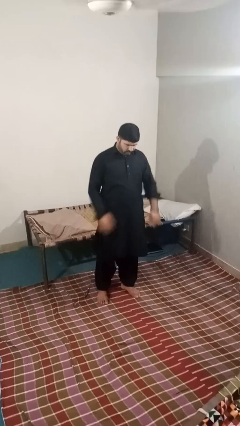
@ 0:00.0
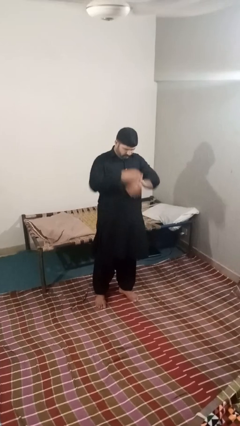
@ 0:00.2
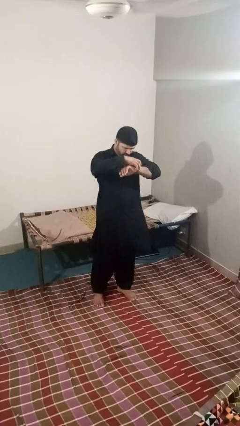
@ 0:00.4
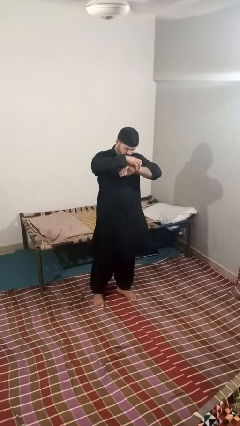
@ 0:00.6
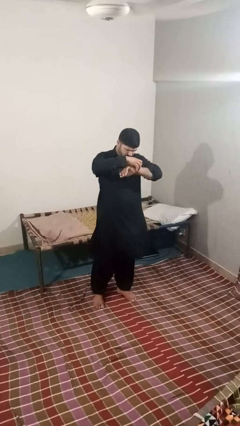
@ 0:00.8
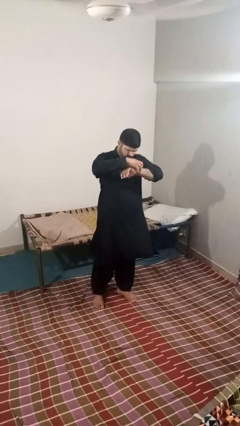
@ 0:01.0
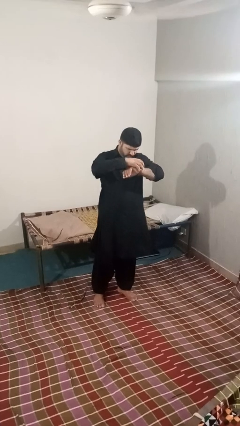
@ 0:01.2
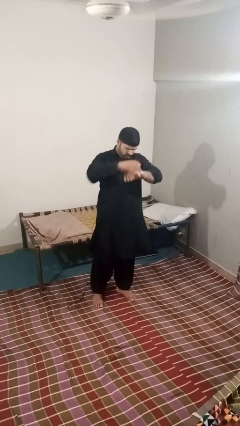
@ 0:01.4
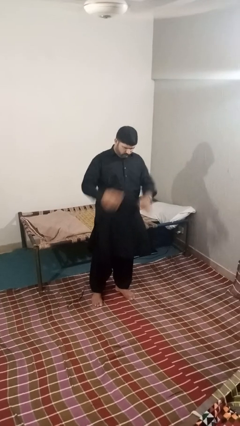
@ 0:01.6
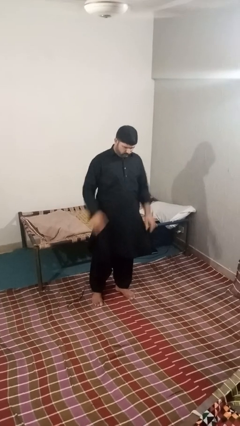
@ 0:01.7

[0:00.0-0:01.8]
person looks at wristwatch

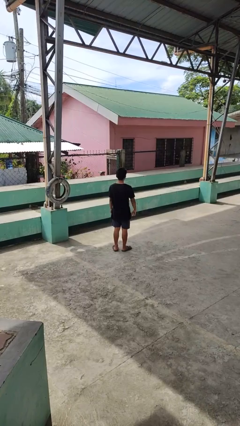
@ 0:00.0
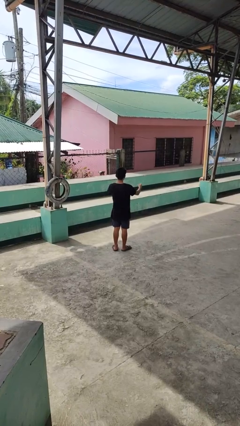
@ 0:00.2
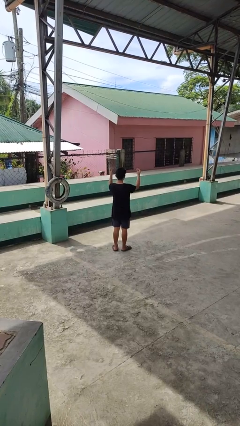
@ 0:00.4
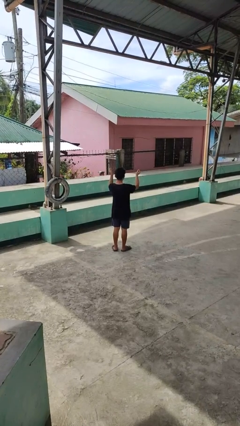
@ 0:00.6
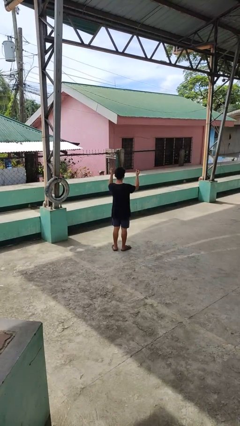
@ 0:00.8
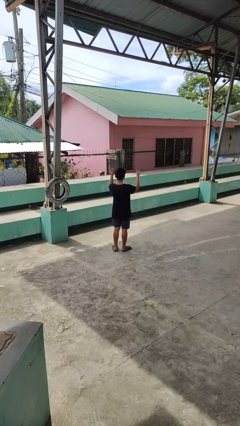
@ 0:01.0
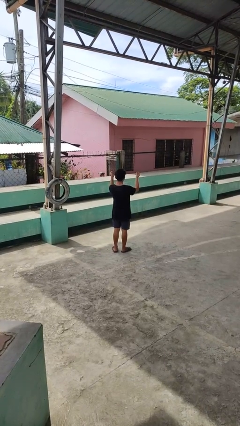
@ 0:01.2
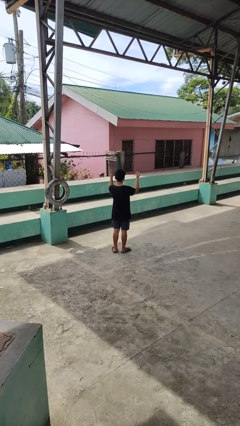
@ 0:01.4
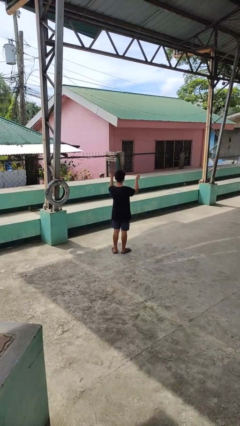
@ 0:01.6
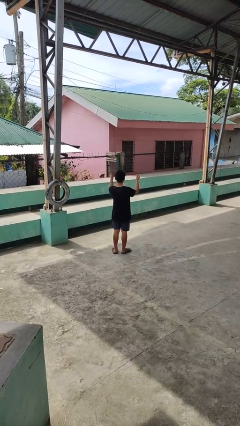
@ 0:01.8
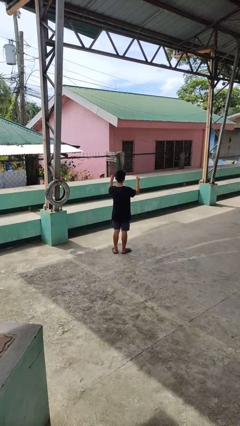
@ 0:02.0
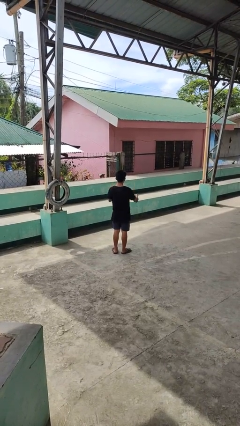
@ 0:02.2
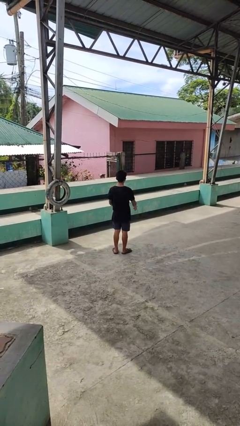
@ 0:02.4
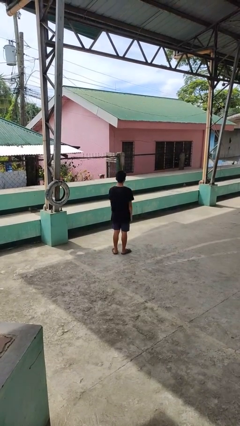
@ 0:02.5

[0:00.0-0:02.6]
person snaps fingers

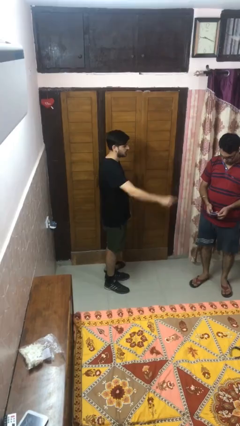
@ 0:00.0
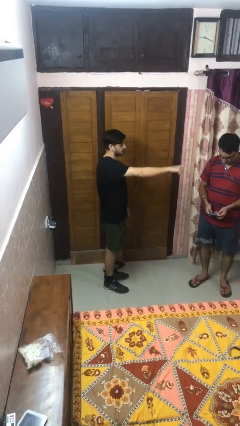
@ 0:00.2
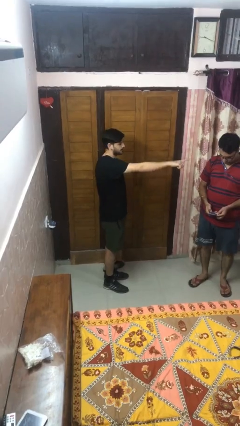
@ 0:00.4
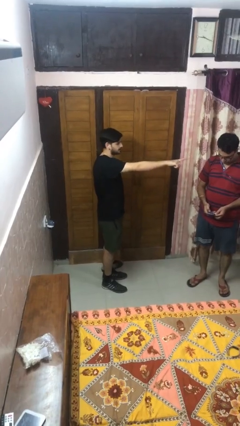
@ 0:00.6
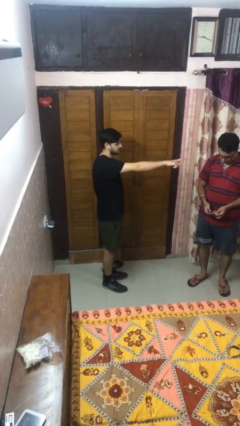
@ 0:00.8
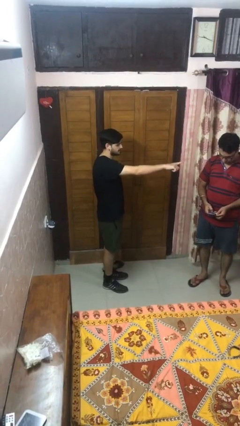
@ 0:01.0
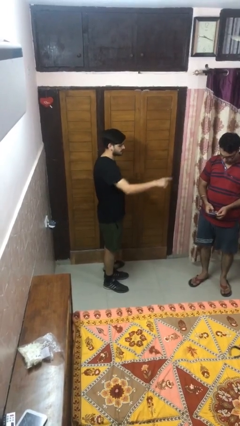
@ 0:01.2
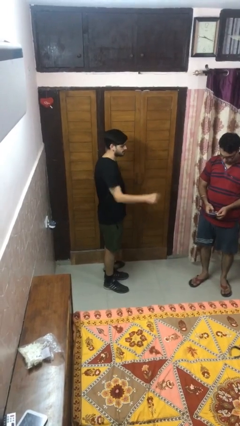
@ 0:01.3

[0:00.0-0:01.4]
person points at person

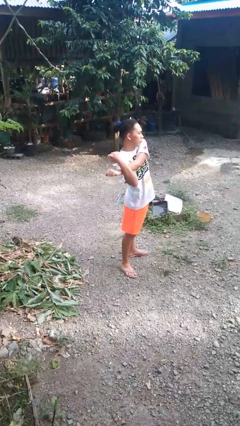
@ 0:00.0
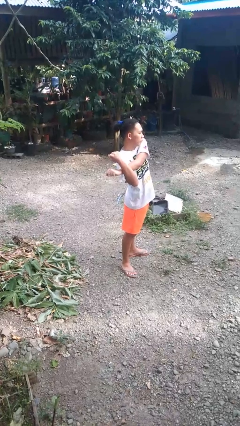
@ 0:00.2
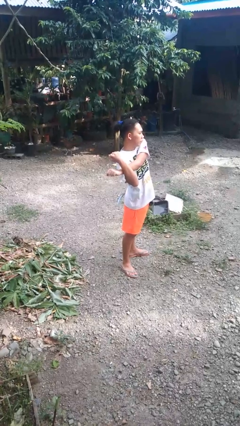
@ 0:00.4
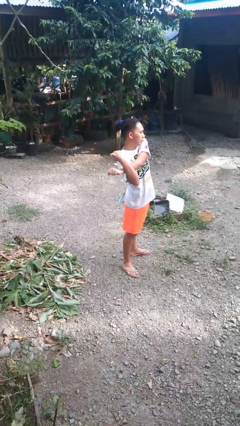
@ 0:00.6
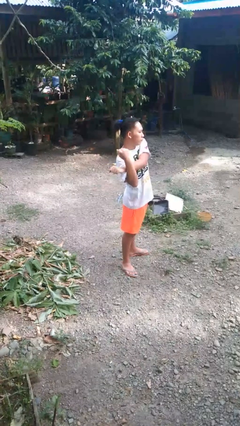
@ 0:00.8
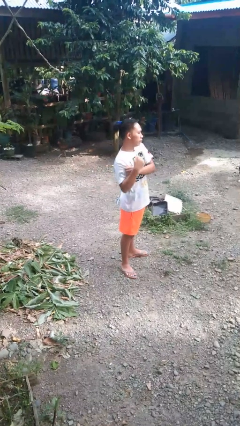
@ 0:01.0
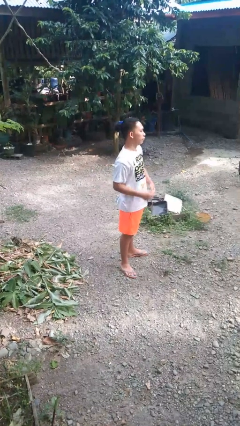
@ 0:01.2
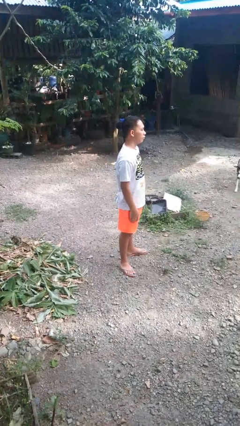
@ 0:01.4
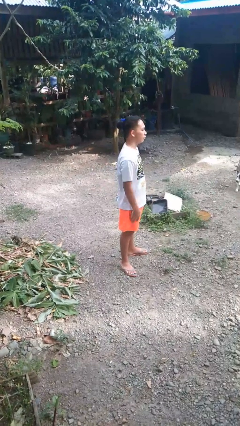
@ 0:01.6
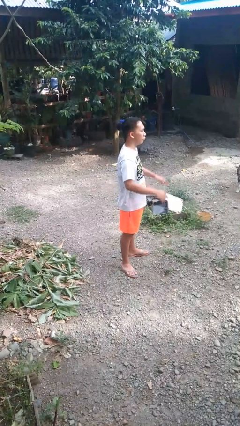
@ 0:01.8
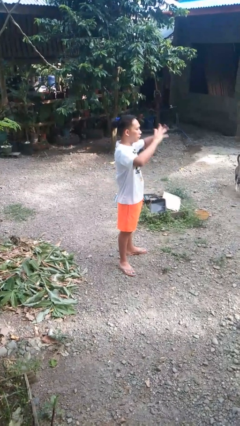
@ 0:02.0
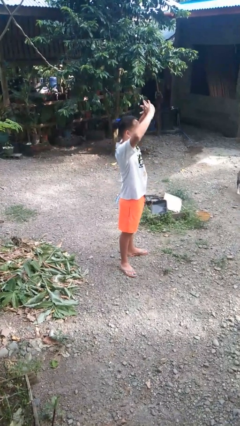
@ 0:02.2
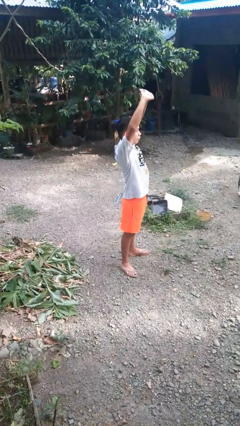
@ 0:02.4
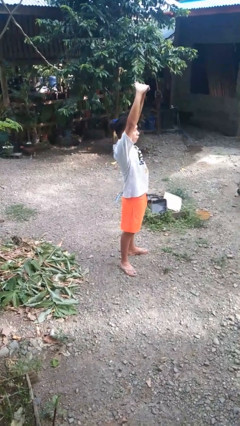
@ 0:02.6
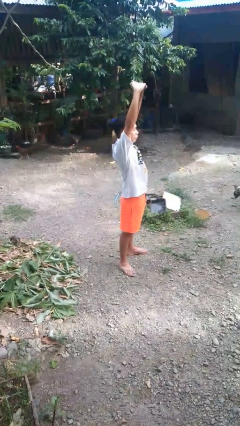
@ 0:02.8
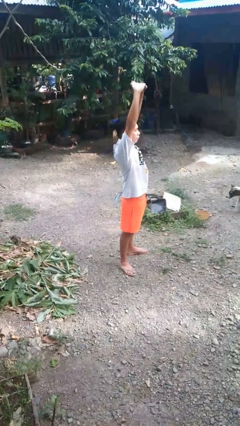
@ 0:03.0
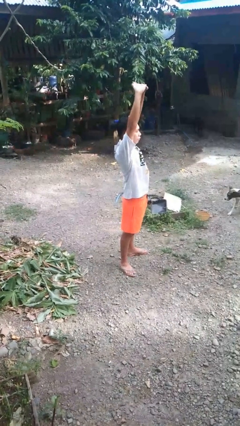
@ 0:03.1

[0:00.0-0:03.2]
person stretches arms over head

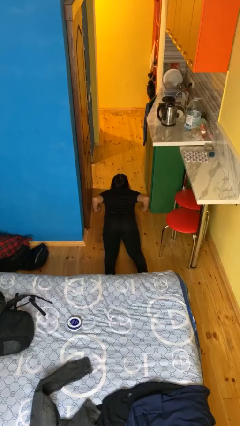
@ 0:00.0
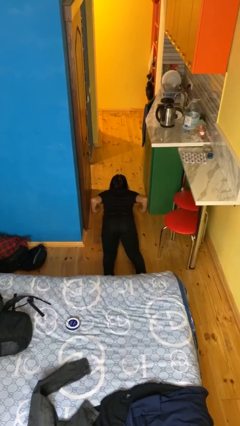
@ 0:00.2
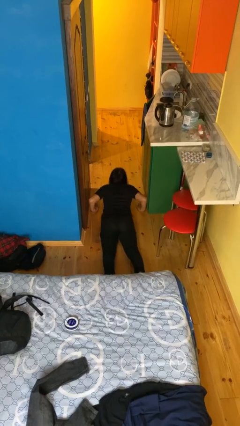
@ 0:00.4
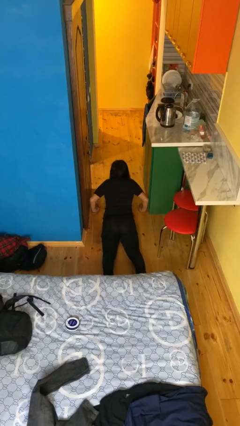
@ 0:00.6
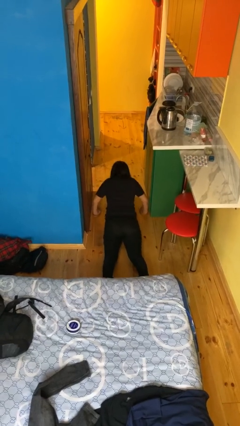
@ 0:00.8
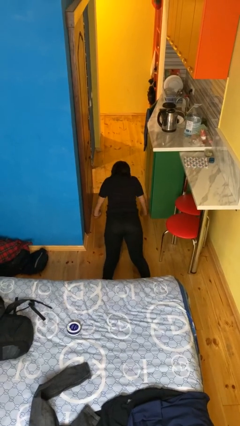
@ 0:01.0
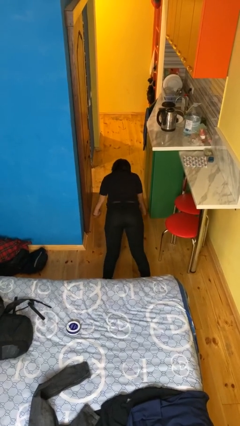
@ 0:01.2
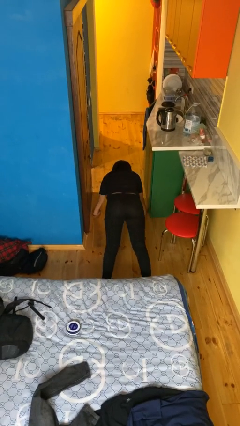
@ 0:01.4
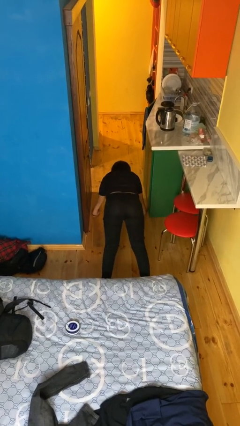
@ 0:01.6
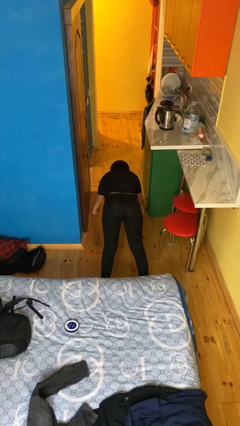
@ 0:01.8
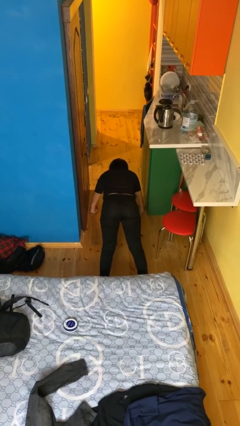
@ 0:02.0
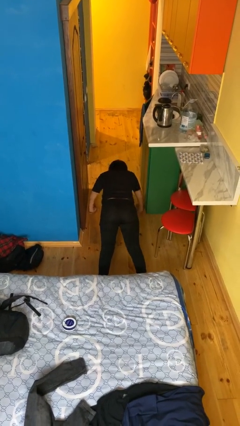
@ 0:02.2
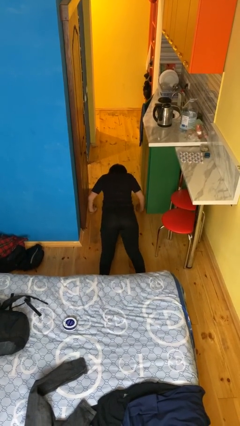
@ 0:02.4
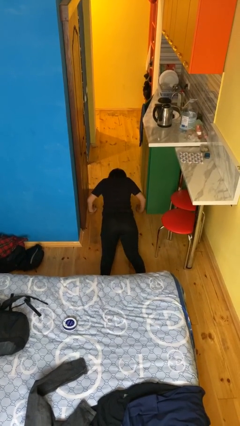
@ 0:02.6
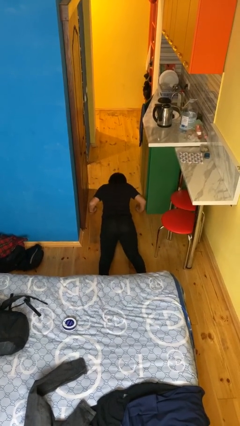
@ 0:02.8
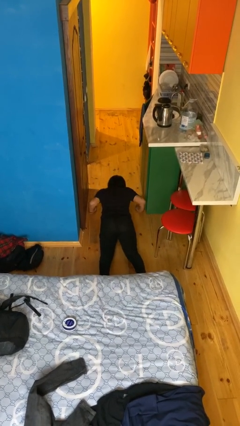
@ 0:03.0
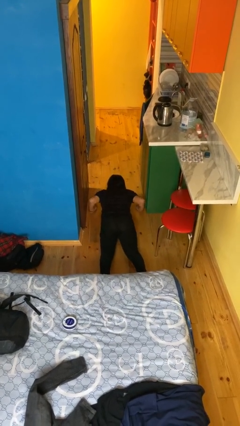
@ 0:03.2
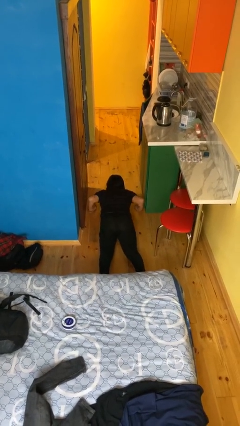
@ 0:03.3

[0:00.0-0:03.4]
person exercises with pushup

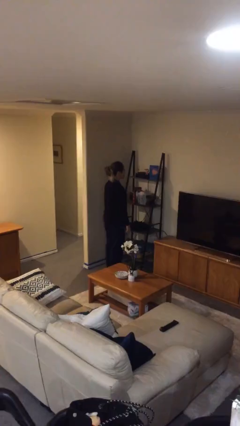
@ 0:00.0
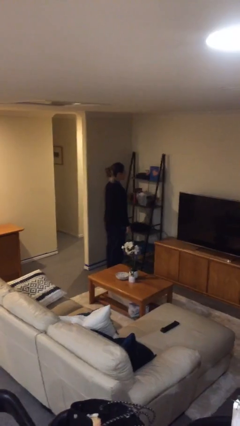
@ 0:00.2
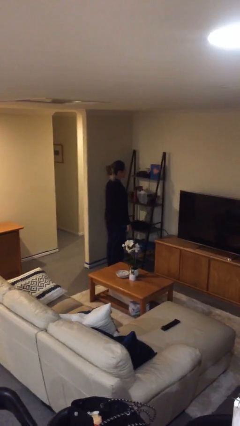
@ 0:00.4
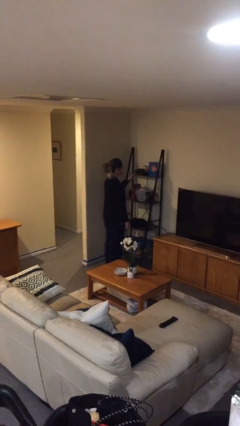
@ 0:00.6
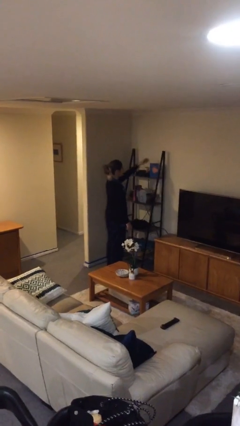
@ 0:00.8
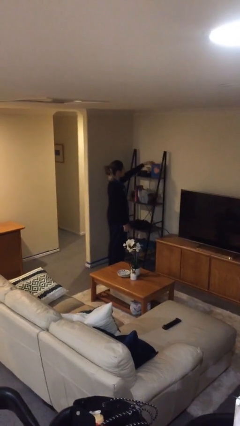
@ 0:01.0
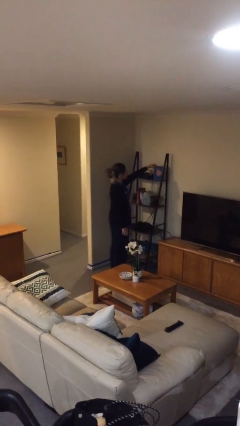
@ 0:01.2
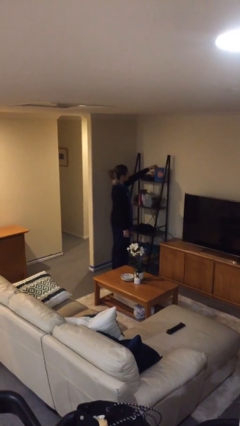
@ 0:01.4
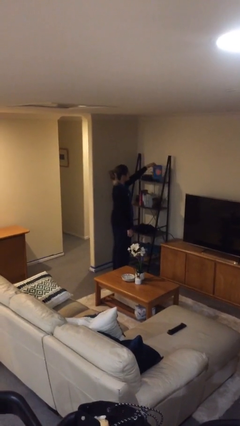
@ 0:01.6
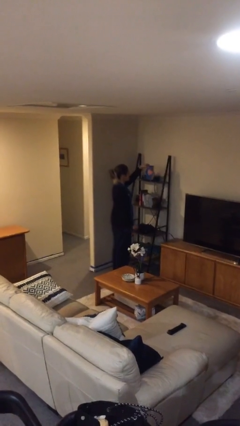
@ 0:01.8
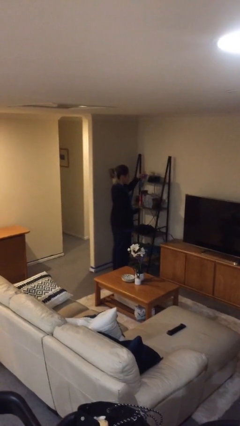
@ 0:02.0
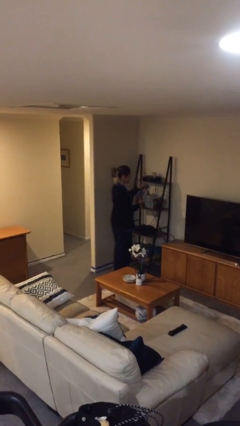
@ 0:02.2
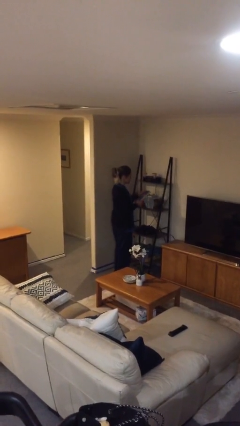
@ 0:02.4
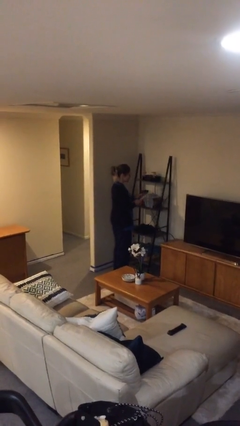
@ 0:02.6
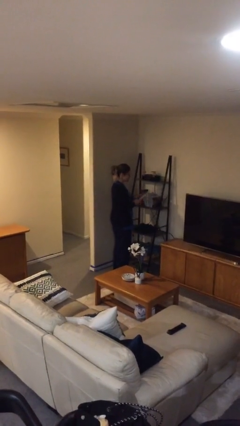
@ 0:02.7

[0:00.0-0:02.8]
person picks up object from shelf

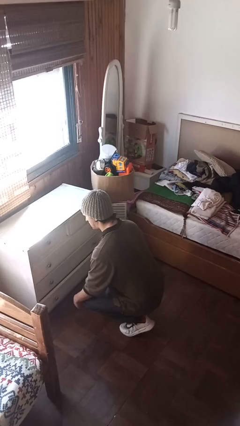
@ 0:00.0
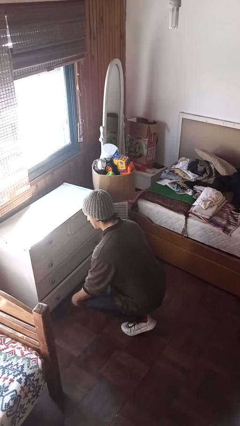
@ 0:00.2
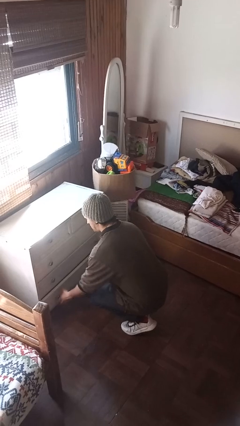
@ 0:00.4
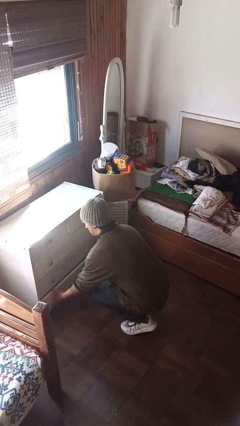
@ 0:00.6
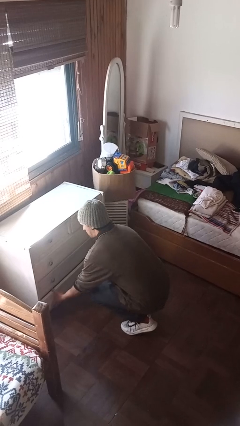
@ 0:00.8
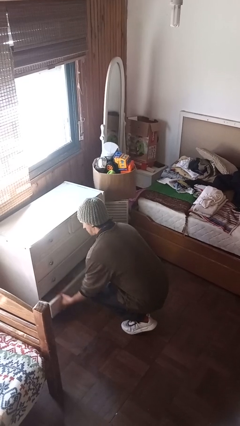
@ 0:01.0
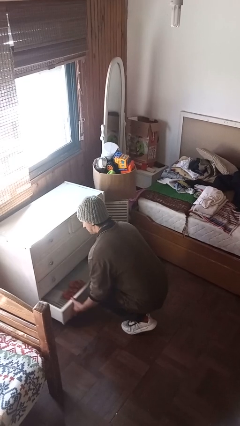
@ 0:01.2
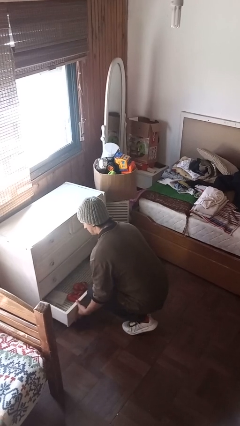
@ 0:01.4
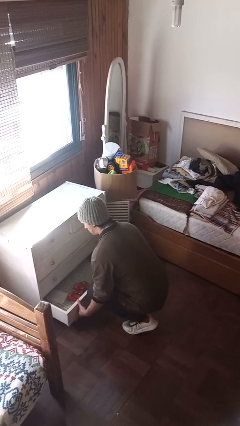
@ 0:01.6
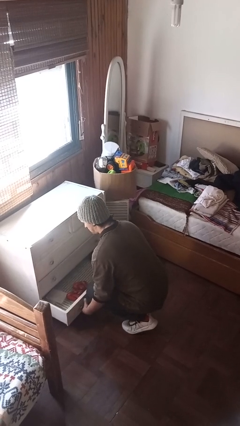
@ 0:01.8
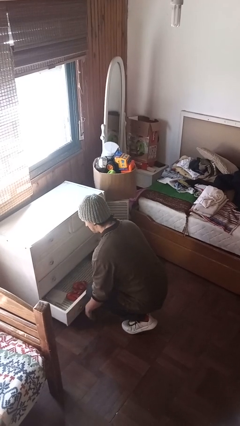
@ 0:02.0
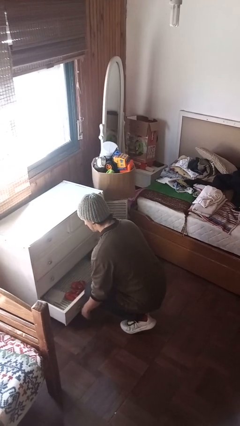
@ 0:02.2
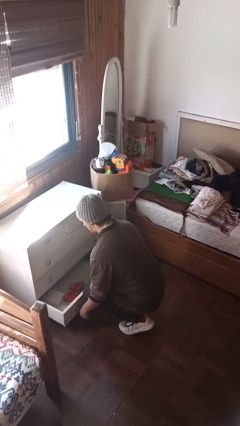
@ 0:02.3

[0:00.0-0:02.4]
person opens dresser drawer
